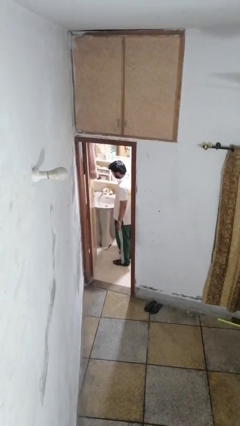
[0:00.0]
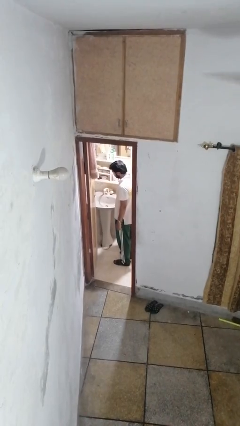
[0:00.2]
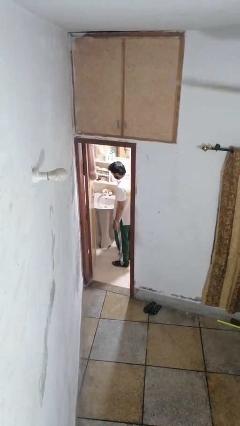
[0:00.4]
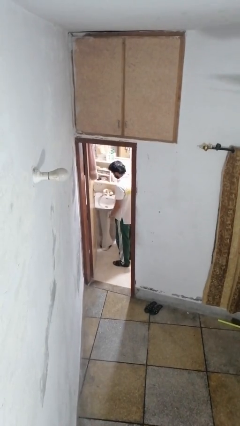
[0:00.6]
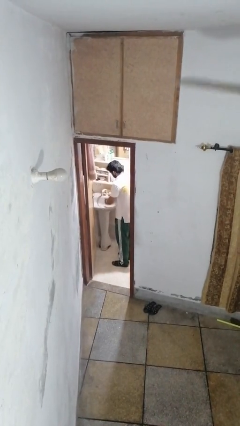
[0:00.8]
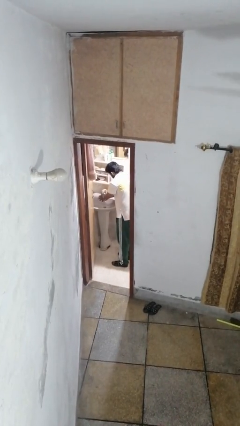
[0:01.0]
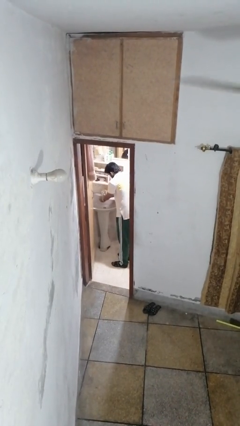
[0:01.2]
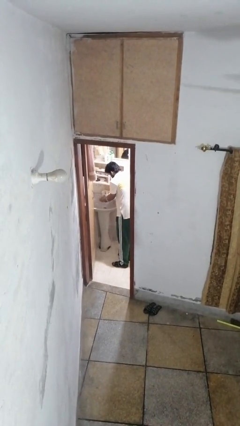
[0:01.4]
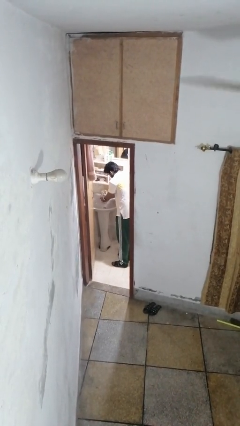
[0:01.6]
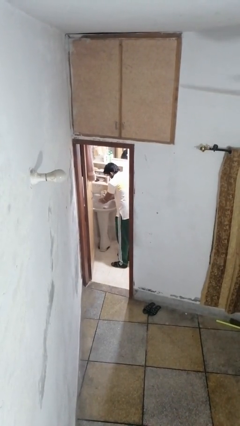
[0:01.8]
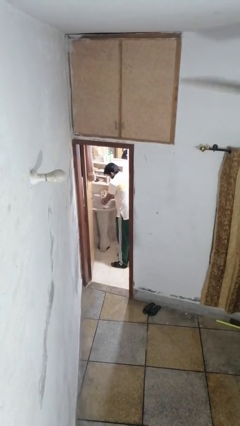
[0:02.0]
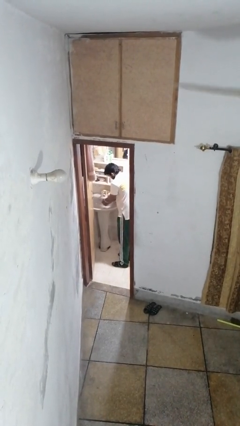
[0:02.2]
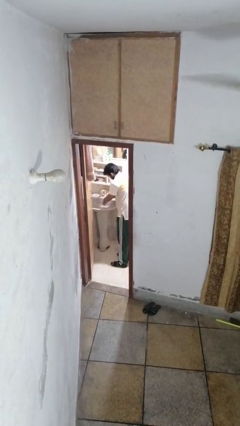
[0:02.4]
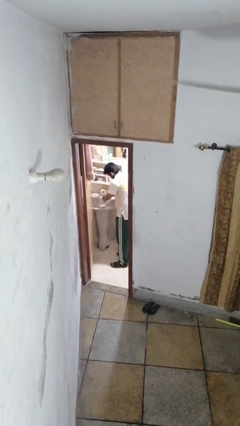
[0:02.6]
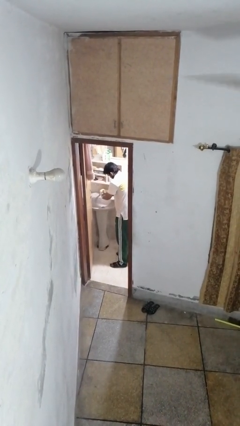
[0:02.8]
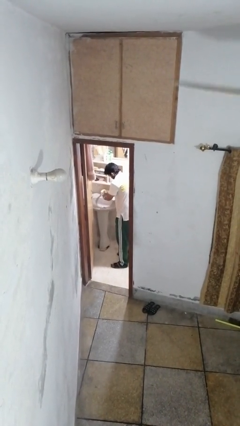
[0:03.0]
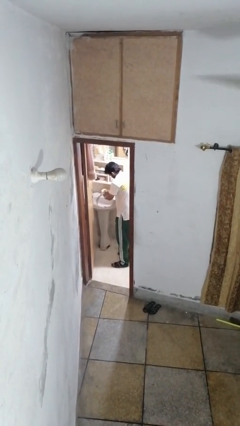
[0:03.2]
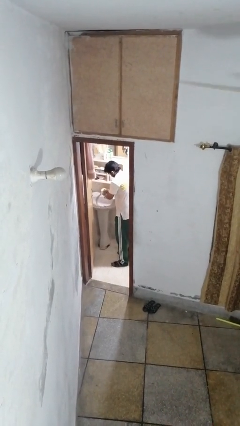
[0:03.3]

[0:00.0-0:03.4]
person washes hands

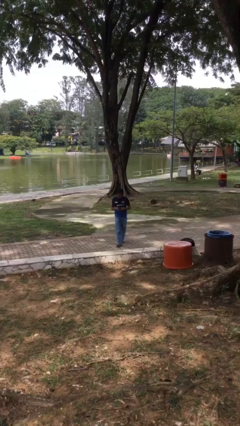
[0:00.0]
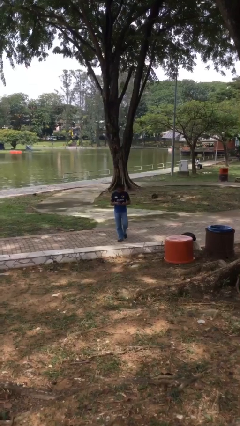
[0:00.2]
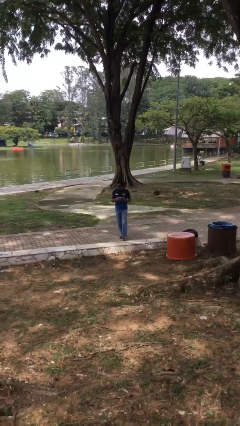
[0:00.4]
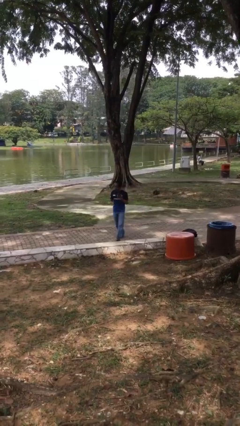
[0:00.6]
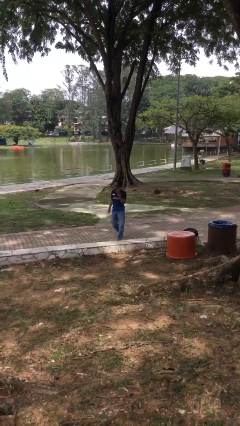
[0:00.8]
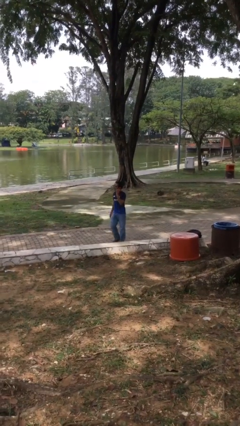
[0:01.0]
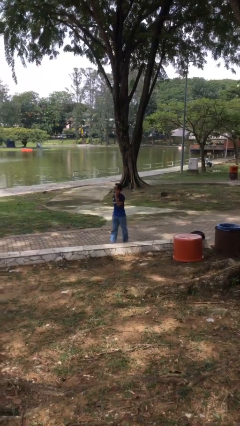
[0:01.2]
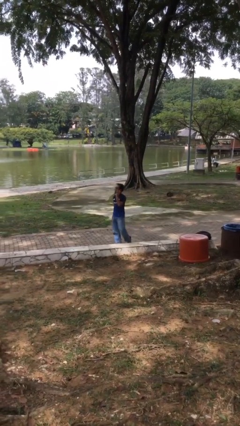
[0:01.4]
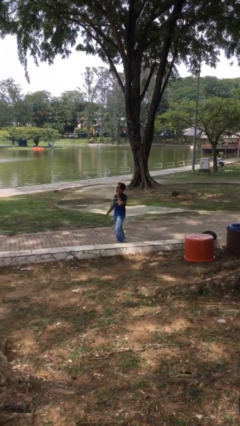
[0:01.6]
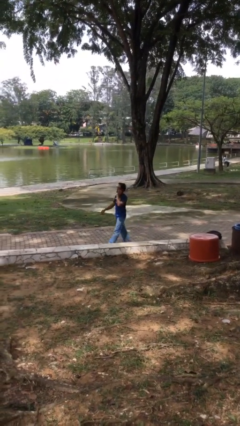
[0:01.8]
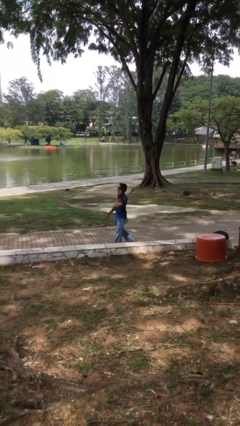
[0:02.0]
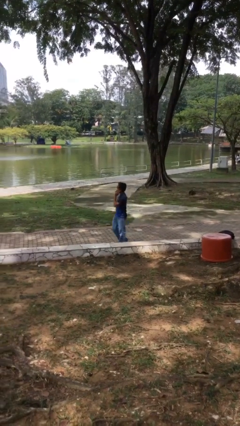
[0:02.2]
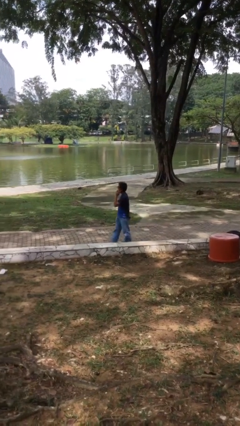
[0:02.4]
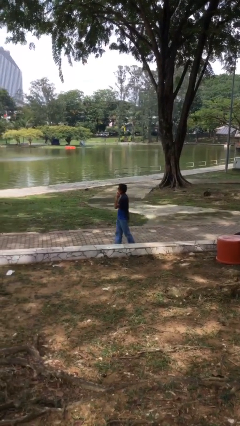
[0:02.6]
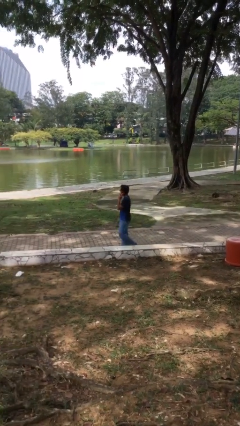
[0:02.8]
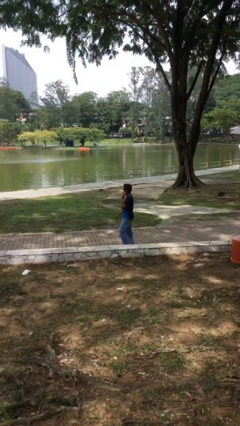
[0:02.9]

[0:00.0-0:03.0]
person talks on phone

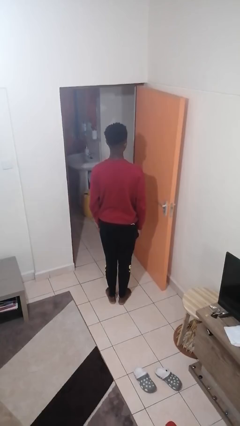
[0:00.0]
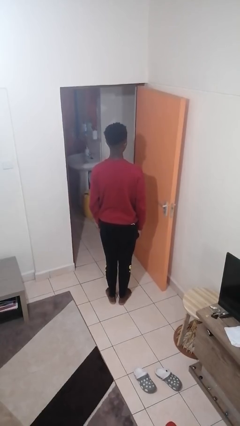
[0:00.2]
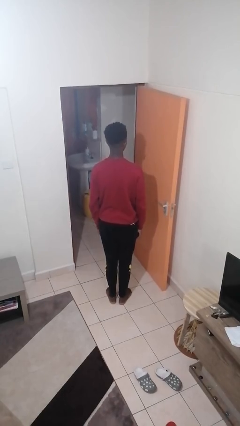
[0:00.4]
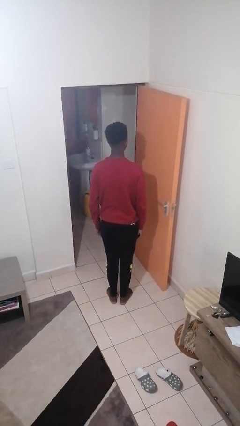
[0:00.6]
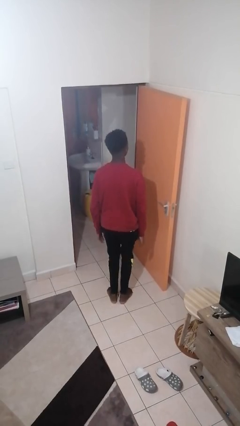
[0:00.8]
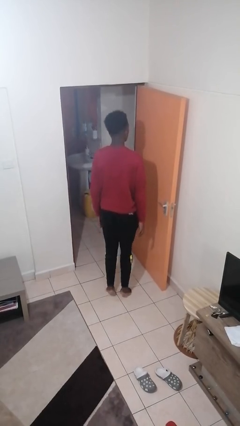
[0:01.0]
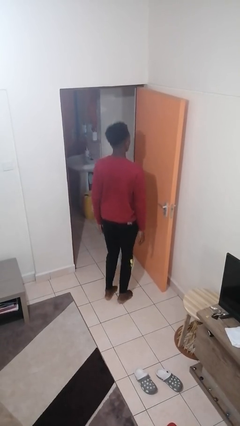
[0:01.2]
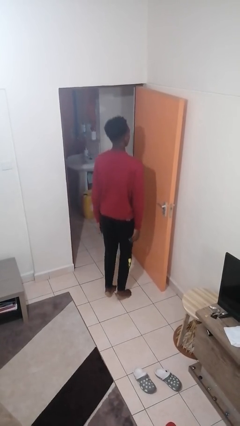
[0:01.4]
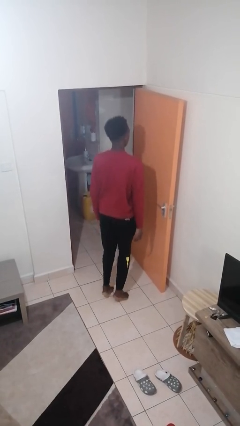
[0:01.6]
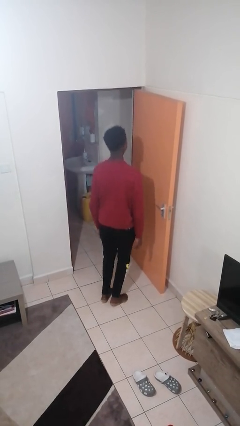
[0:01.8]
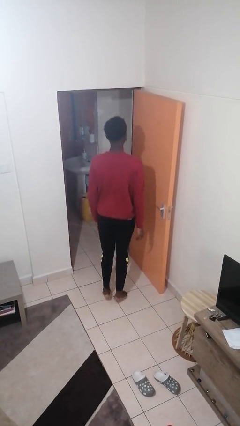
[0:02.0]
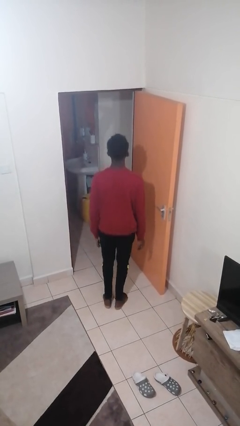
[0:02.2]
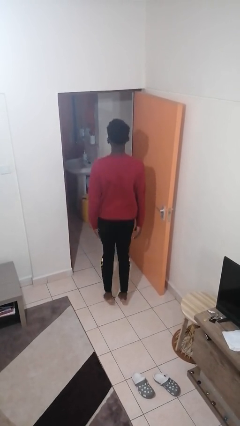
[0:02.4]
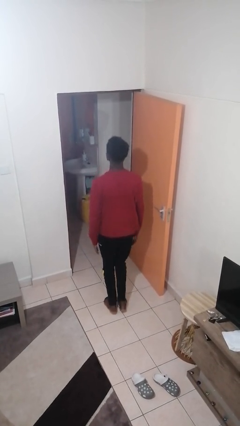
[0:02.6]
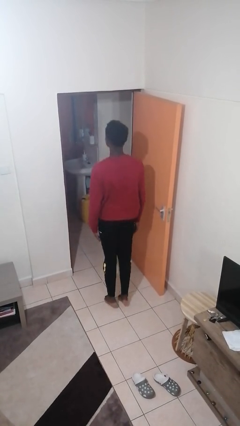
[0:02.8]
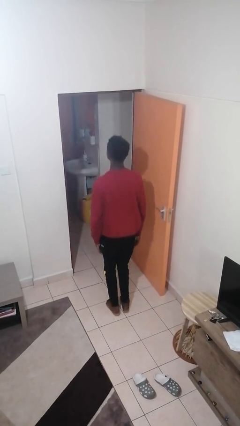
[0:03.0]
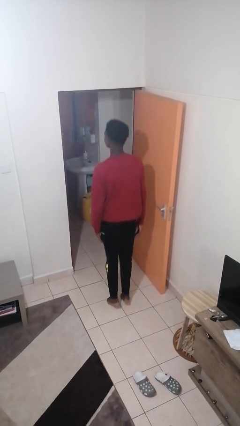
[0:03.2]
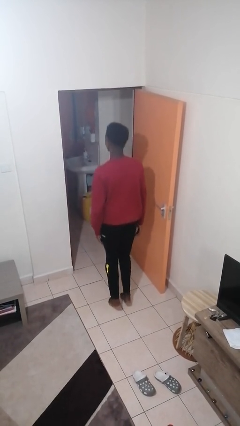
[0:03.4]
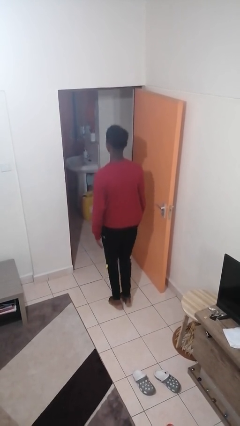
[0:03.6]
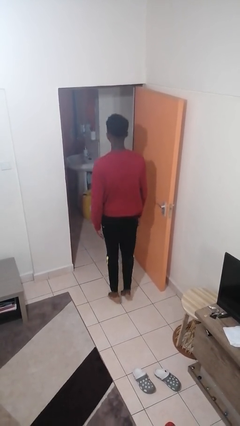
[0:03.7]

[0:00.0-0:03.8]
person drinks from straw

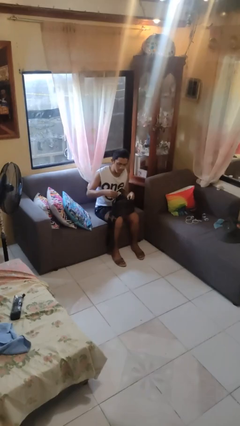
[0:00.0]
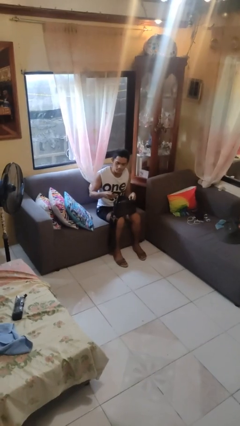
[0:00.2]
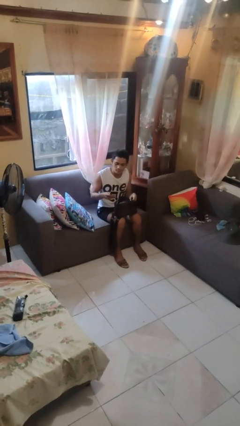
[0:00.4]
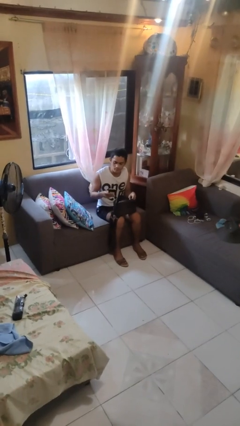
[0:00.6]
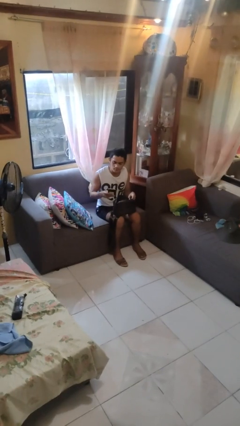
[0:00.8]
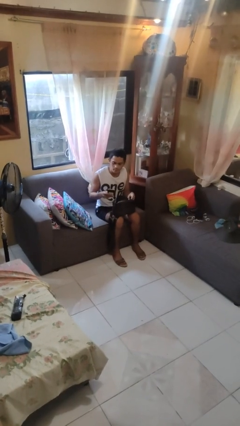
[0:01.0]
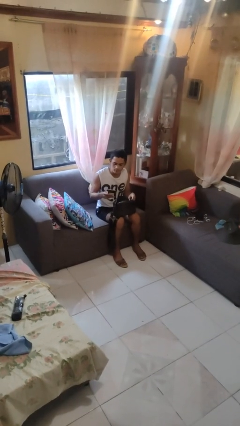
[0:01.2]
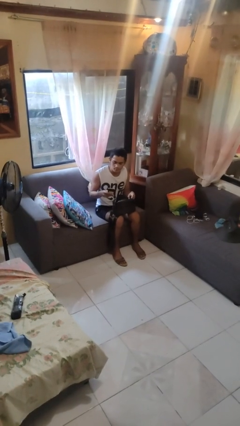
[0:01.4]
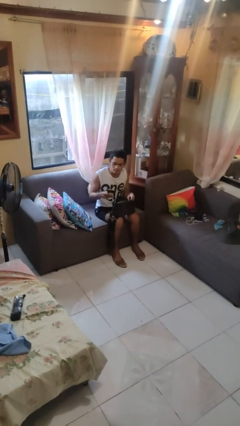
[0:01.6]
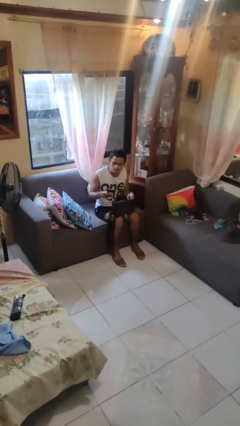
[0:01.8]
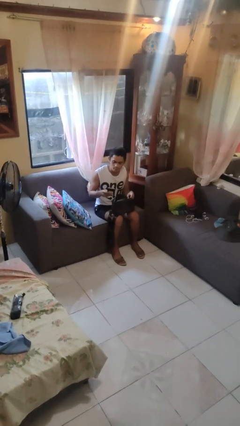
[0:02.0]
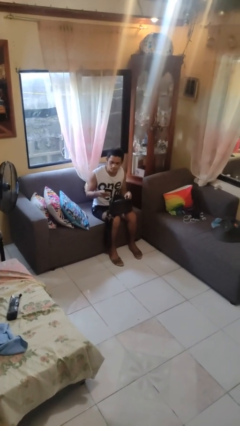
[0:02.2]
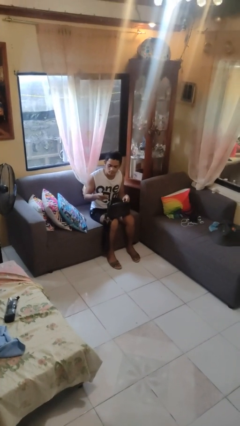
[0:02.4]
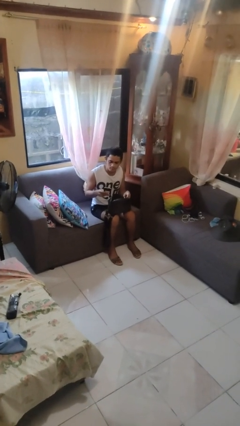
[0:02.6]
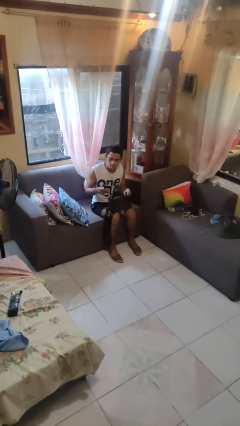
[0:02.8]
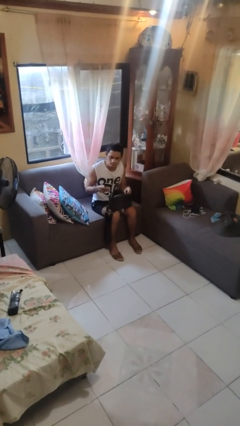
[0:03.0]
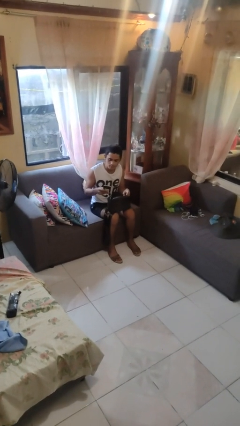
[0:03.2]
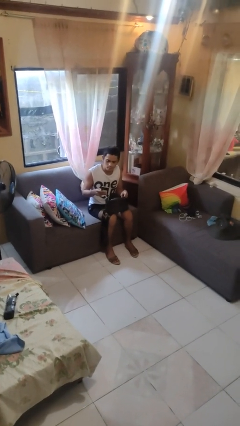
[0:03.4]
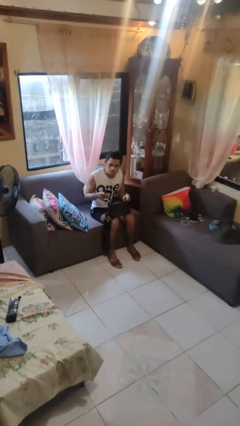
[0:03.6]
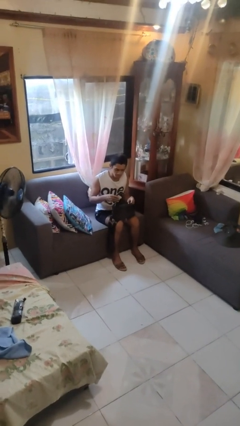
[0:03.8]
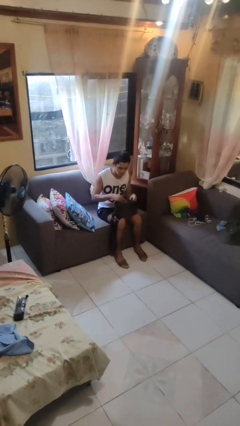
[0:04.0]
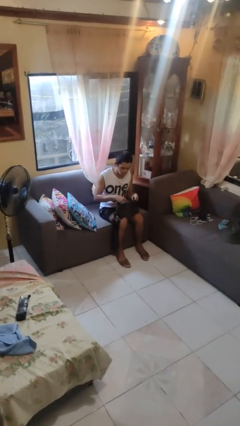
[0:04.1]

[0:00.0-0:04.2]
person takes object from purse

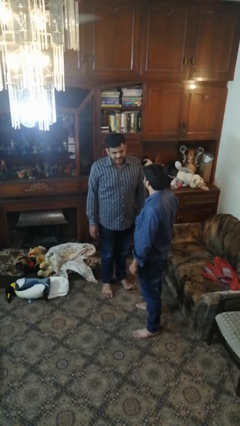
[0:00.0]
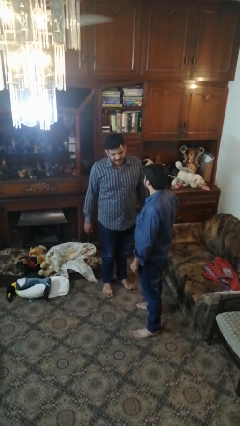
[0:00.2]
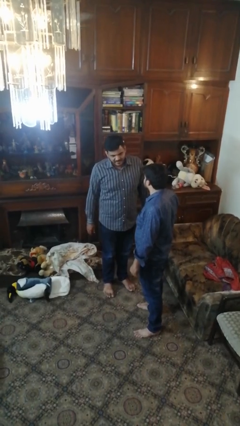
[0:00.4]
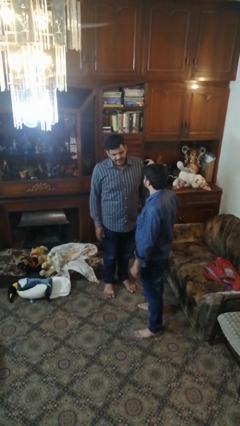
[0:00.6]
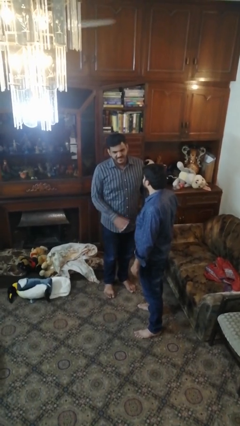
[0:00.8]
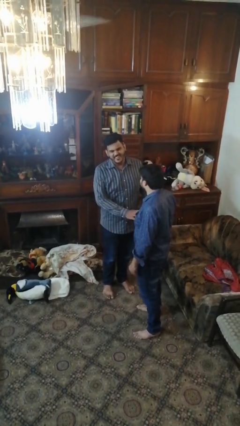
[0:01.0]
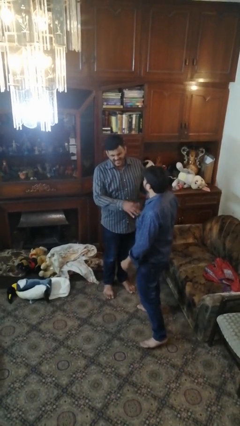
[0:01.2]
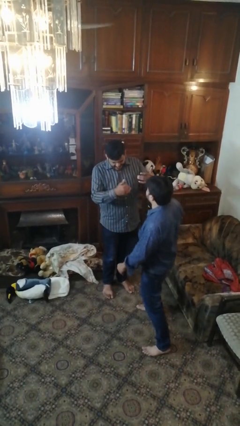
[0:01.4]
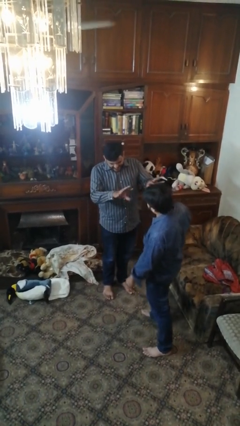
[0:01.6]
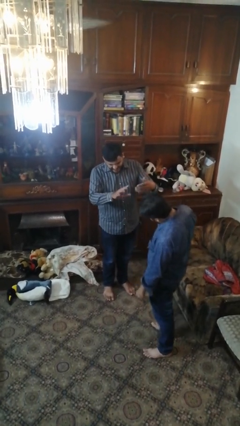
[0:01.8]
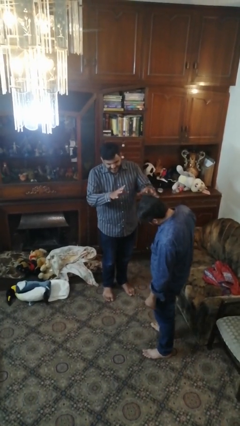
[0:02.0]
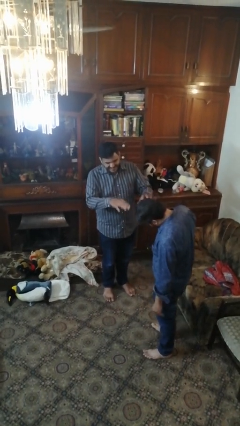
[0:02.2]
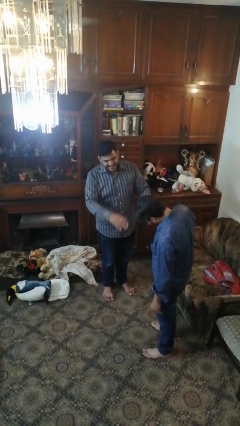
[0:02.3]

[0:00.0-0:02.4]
person shoves person

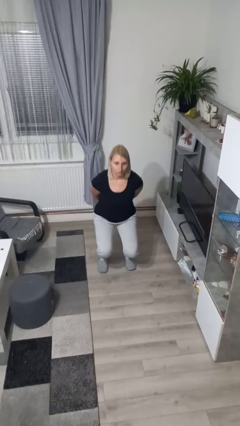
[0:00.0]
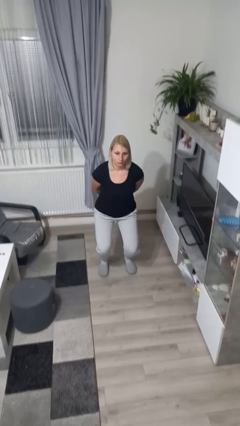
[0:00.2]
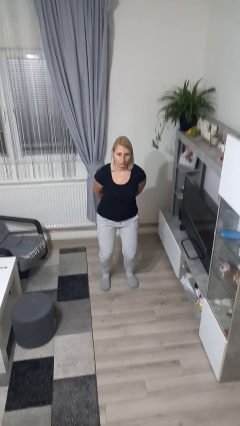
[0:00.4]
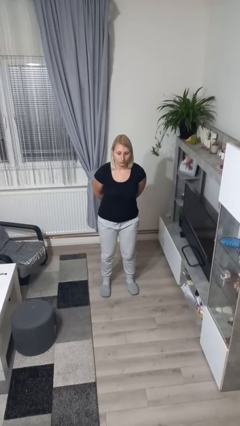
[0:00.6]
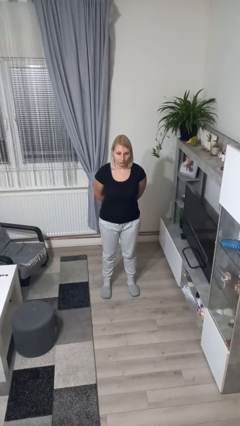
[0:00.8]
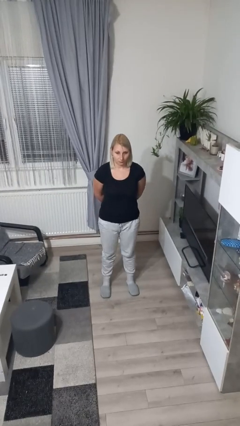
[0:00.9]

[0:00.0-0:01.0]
person stands up
